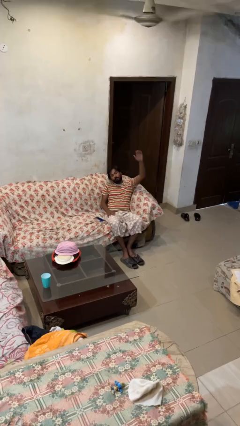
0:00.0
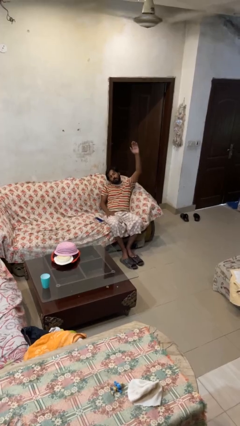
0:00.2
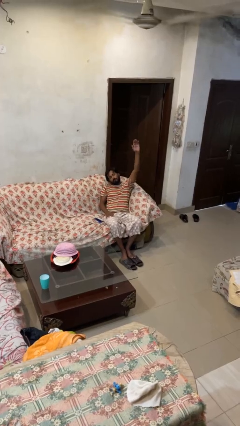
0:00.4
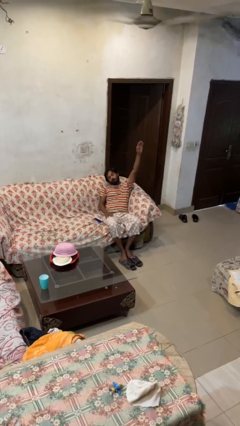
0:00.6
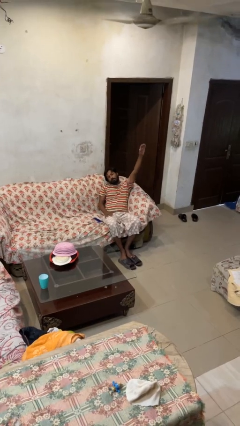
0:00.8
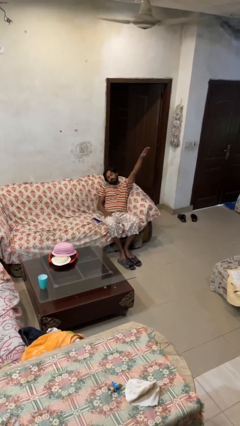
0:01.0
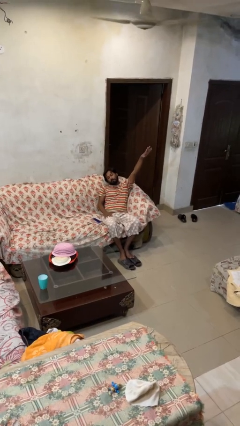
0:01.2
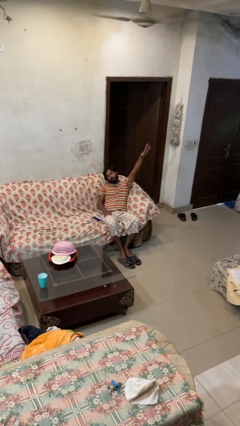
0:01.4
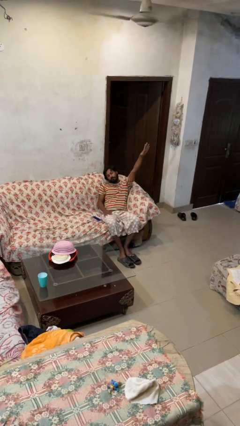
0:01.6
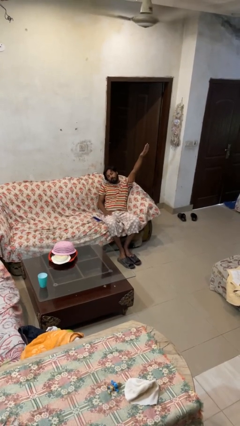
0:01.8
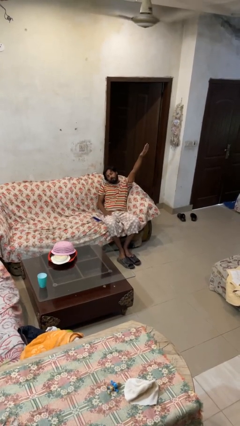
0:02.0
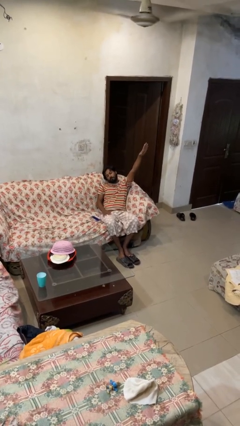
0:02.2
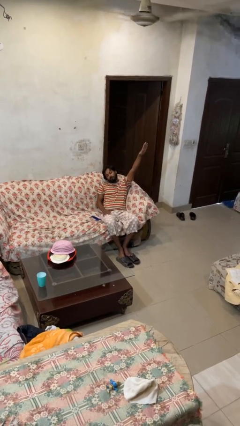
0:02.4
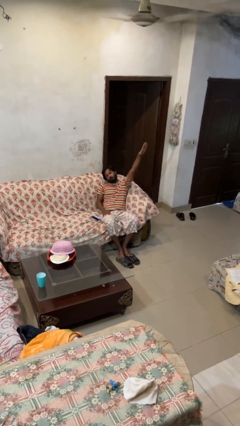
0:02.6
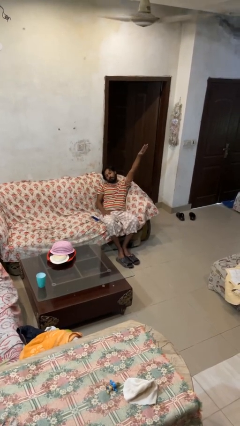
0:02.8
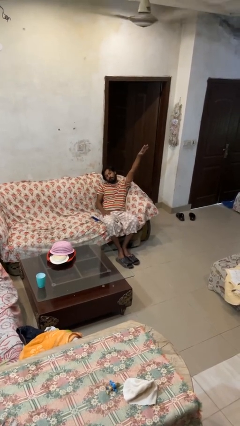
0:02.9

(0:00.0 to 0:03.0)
person gestures raise hand

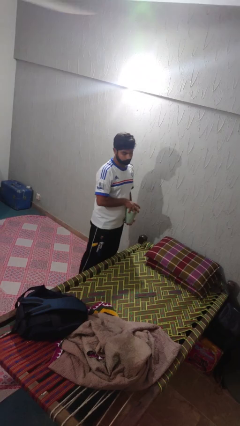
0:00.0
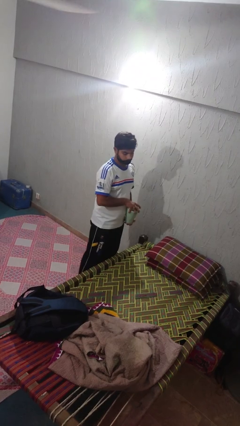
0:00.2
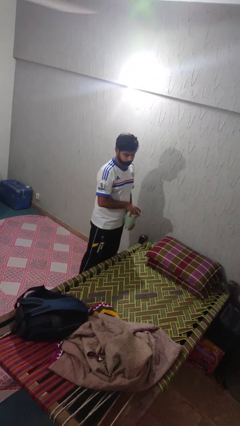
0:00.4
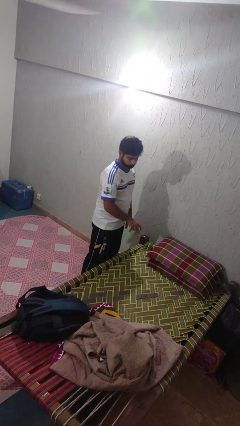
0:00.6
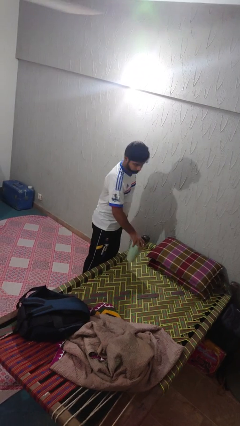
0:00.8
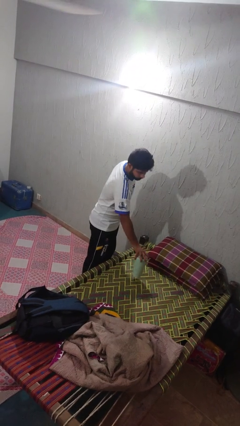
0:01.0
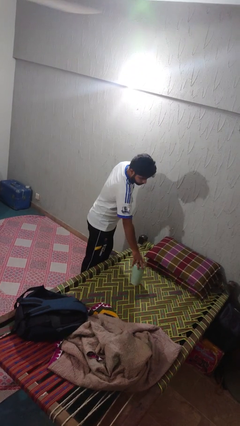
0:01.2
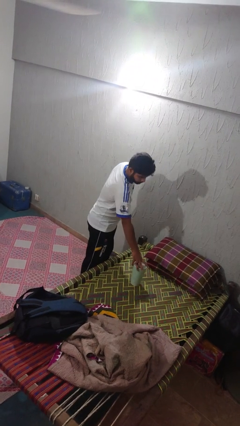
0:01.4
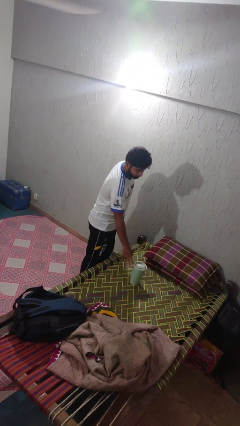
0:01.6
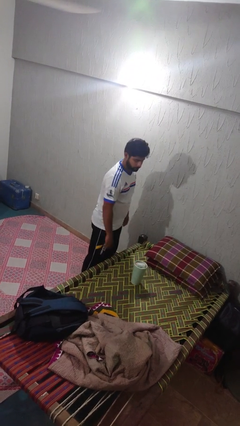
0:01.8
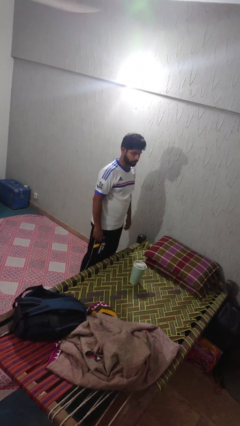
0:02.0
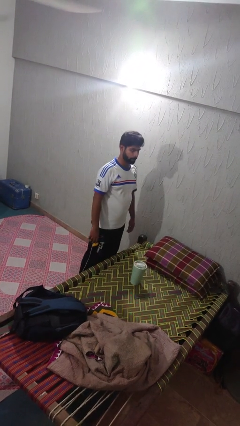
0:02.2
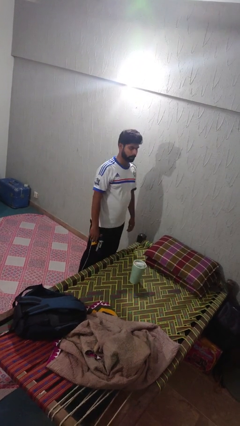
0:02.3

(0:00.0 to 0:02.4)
person puts down object on bed

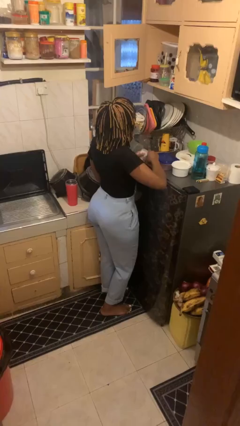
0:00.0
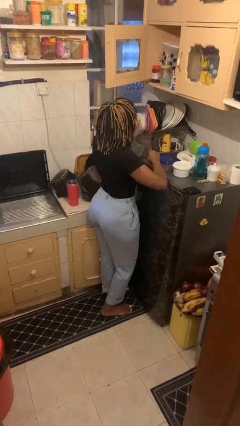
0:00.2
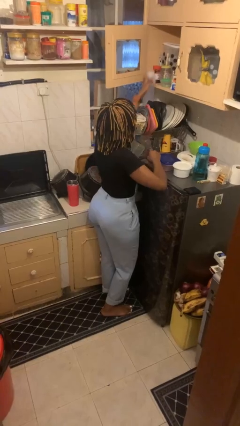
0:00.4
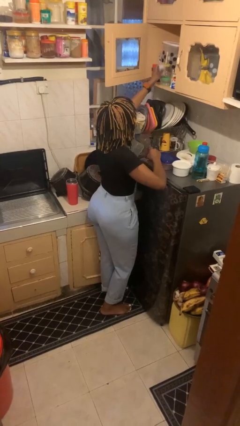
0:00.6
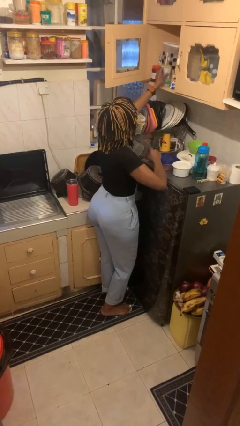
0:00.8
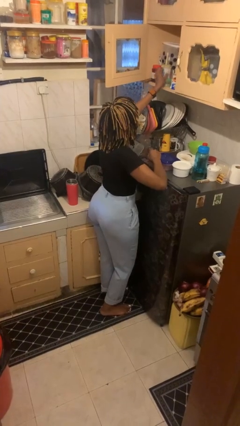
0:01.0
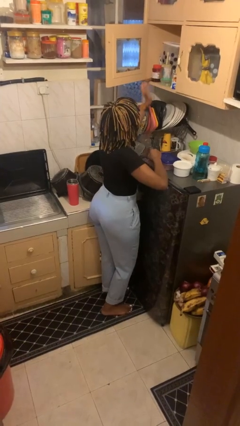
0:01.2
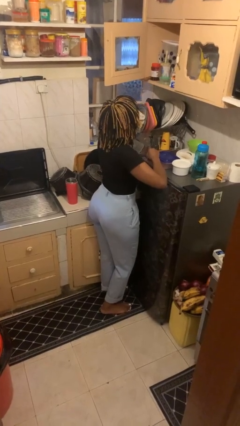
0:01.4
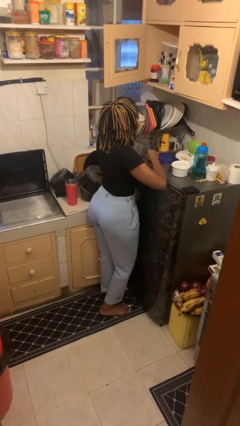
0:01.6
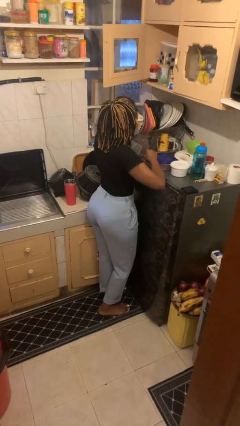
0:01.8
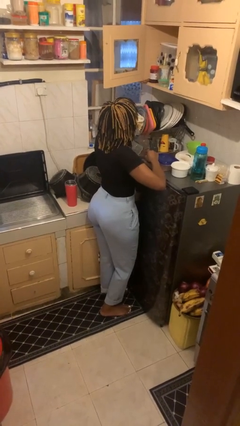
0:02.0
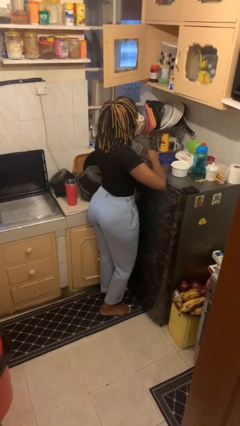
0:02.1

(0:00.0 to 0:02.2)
person puts object in cabinet

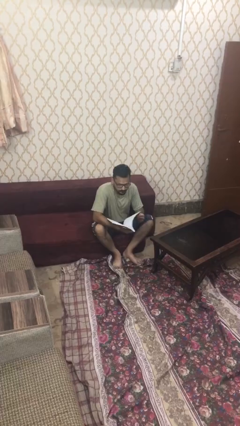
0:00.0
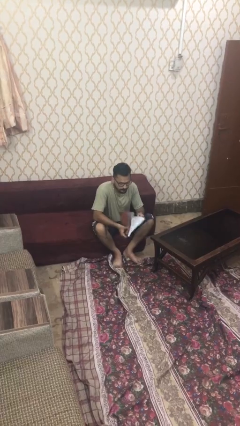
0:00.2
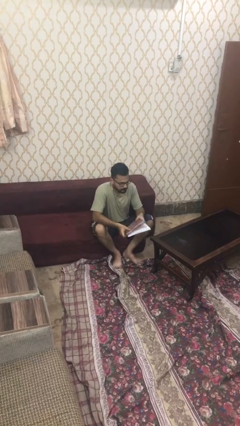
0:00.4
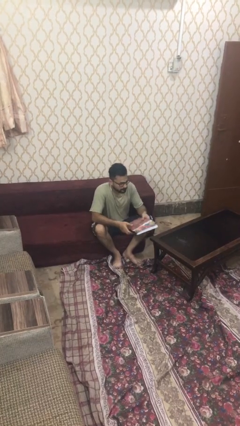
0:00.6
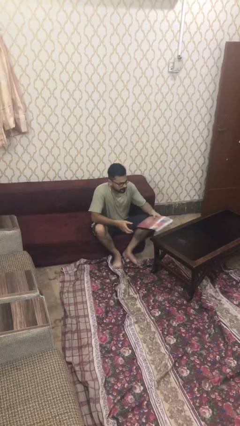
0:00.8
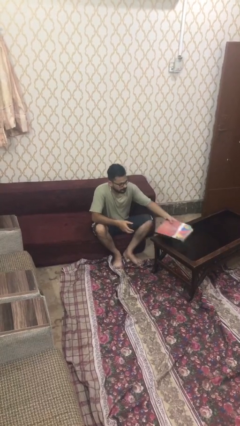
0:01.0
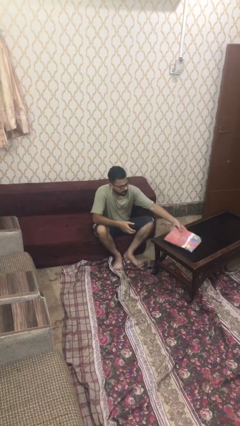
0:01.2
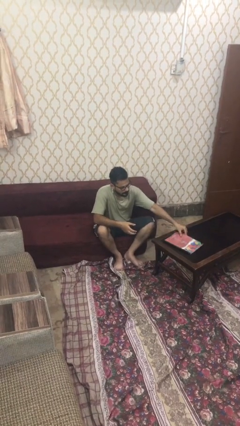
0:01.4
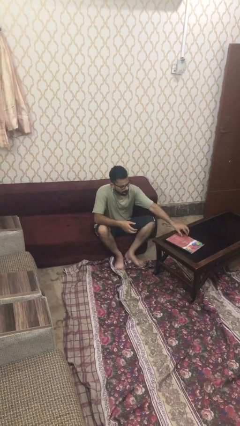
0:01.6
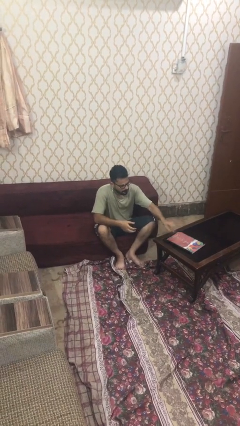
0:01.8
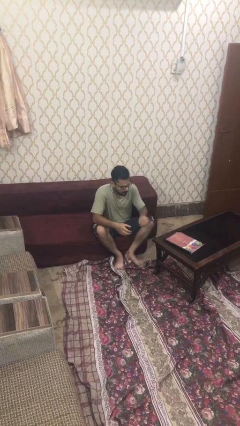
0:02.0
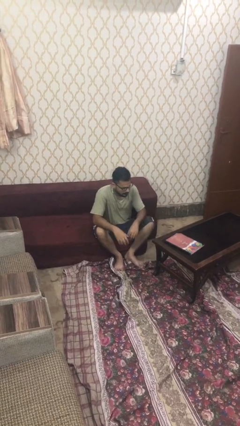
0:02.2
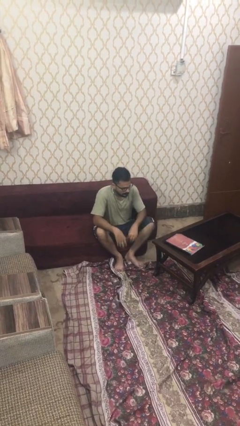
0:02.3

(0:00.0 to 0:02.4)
person puts down object on table

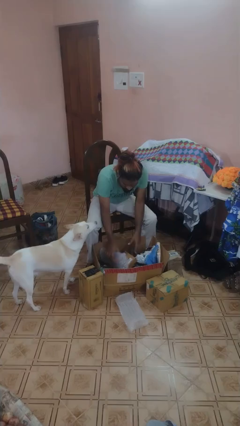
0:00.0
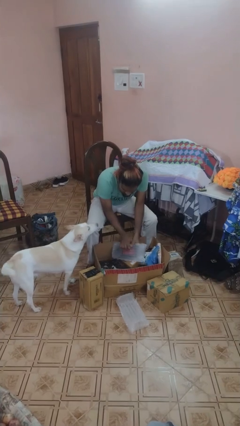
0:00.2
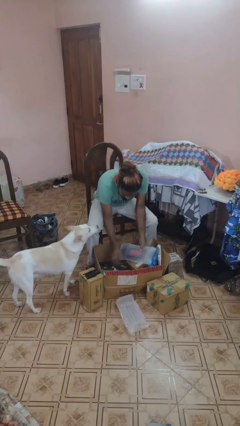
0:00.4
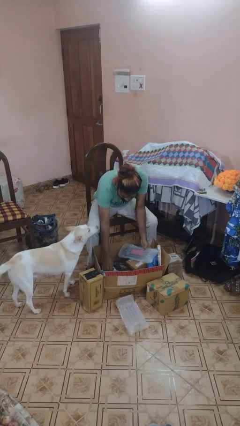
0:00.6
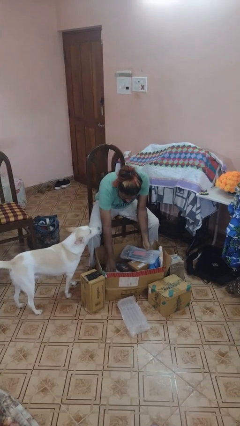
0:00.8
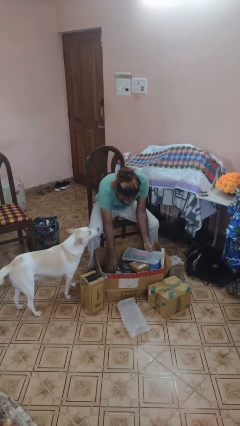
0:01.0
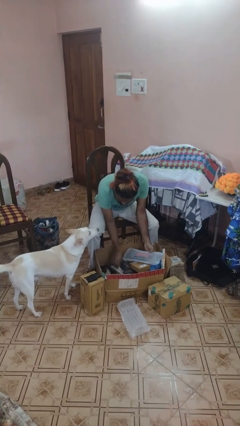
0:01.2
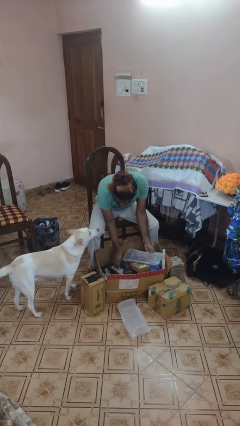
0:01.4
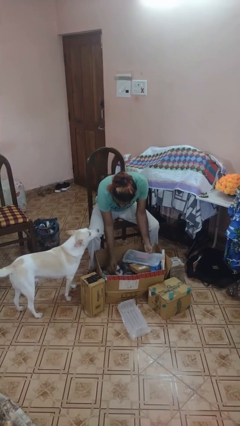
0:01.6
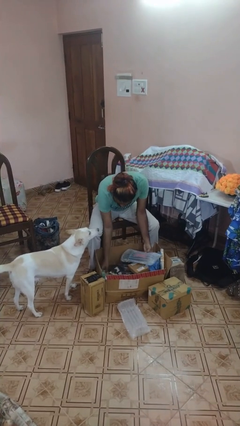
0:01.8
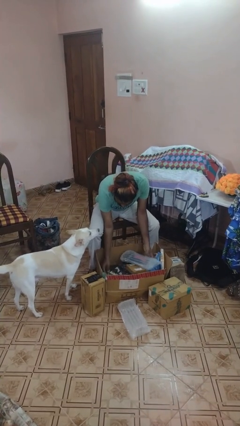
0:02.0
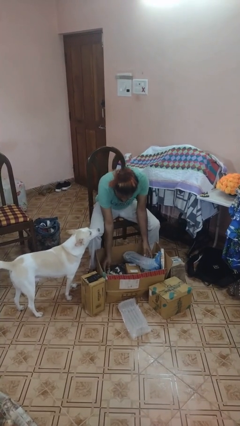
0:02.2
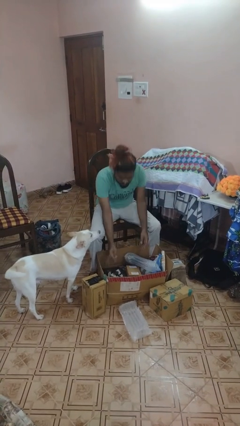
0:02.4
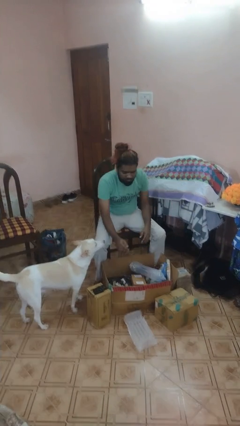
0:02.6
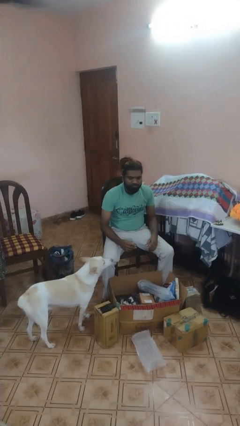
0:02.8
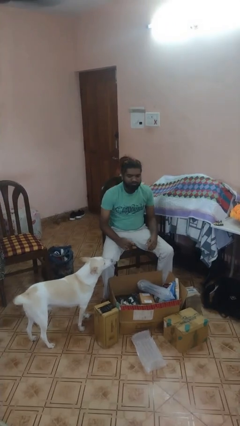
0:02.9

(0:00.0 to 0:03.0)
person searches in box

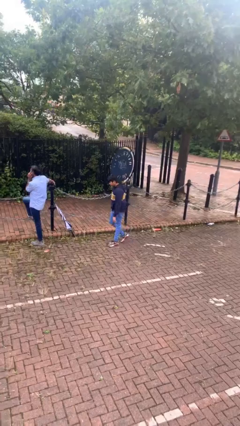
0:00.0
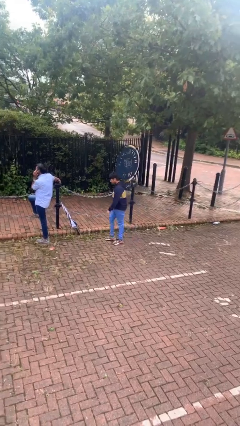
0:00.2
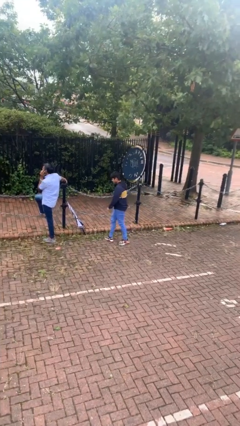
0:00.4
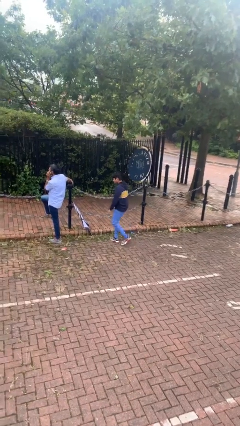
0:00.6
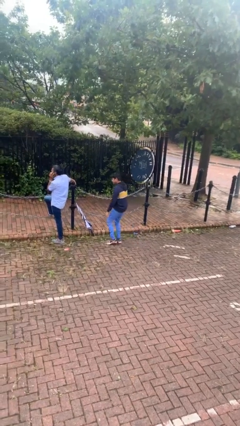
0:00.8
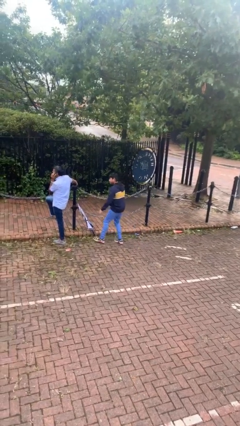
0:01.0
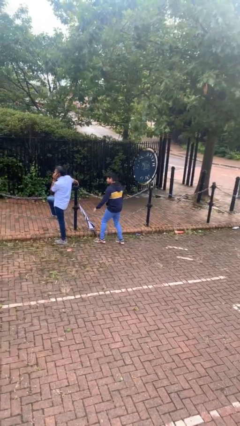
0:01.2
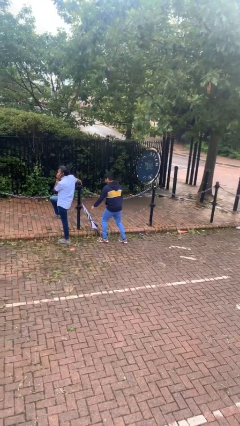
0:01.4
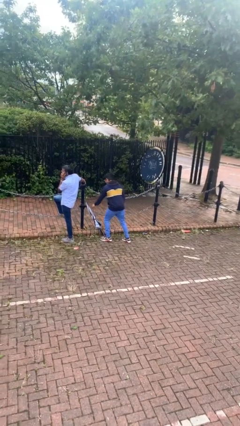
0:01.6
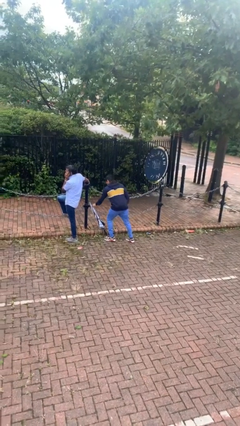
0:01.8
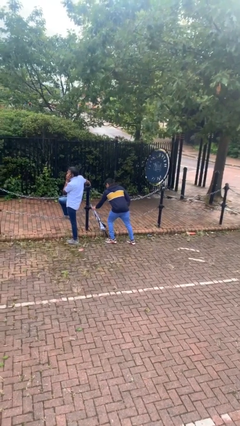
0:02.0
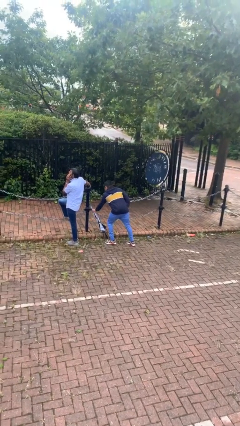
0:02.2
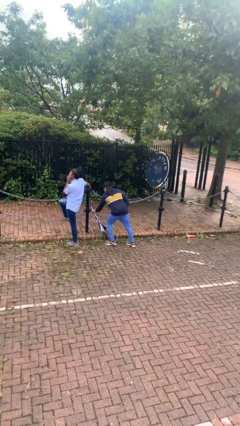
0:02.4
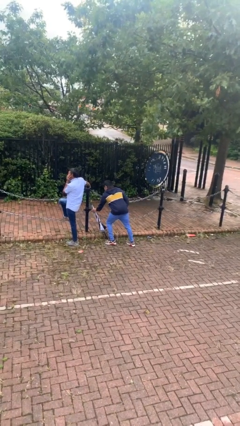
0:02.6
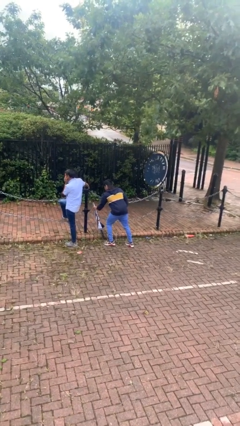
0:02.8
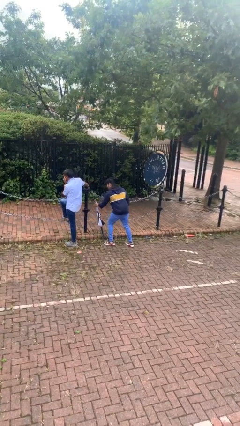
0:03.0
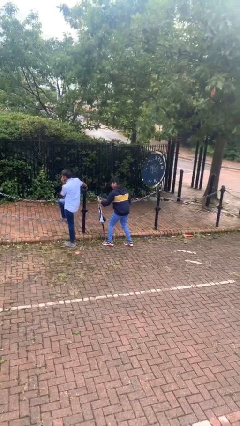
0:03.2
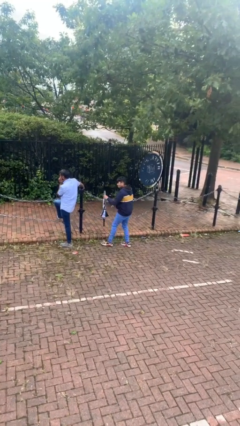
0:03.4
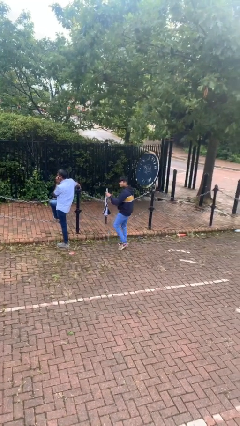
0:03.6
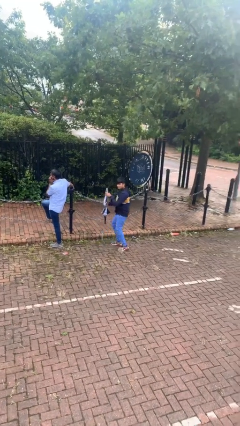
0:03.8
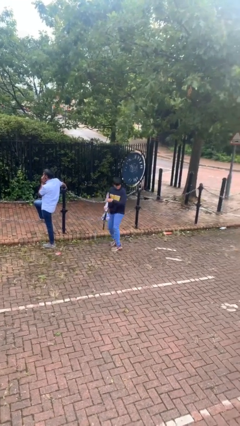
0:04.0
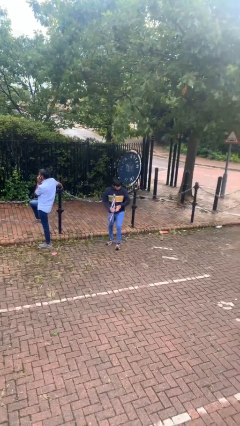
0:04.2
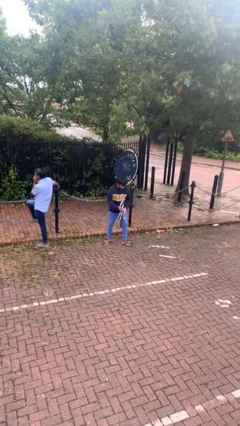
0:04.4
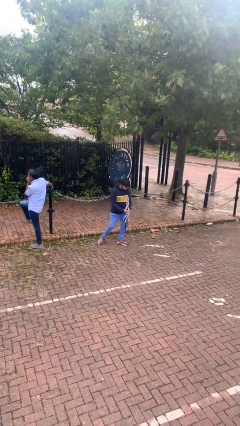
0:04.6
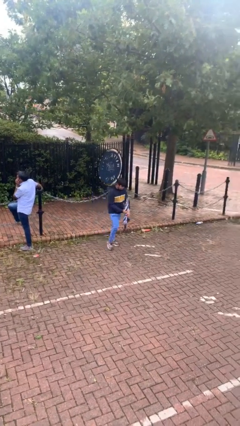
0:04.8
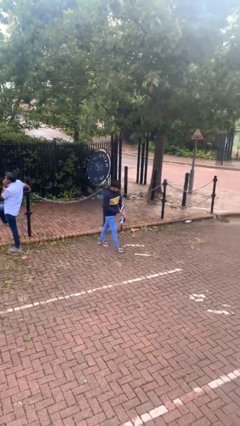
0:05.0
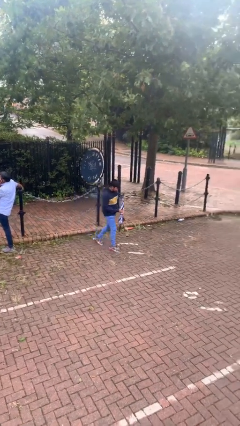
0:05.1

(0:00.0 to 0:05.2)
person steals object from person
